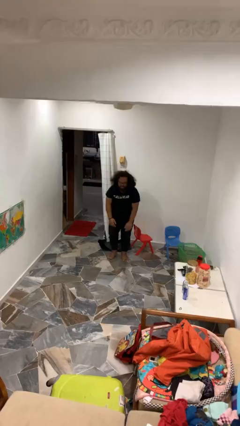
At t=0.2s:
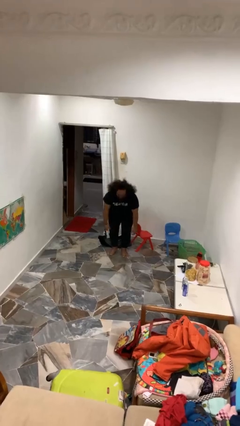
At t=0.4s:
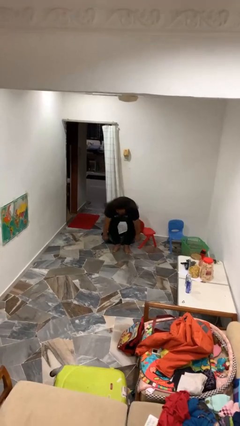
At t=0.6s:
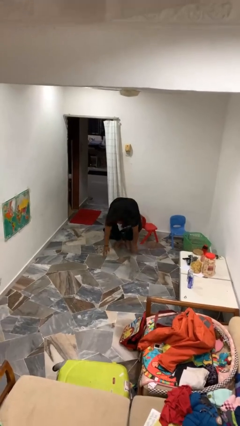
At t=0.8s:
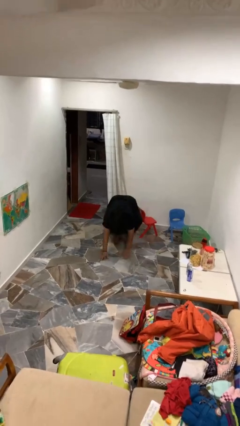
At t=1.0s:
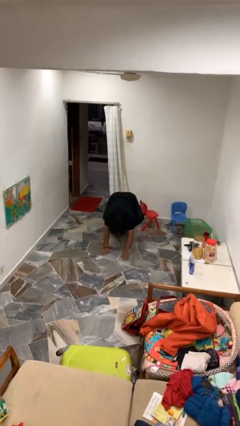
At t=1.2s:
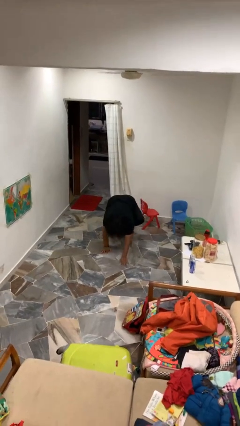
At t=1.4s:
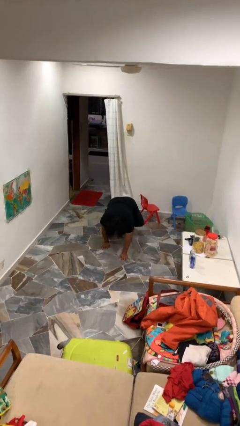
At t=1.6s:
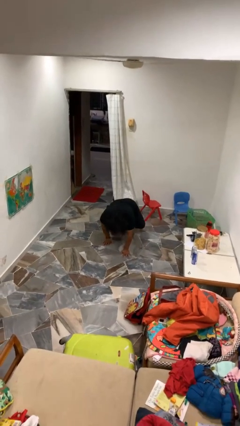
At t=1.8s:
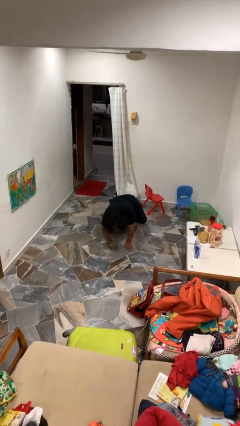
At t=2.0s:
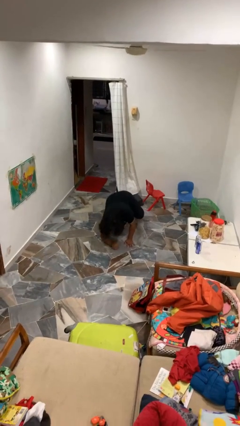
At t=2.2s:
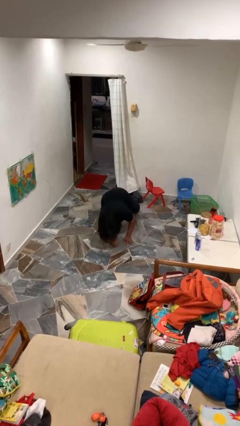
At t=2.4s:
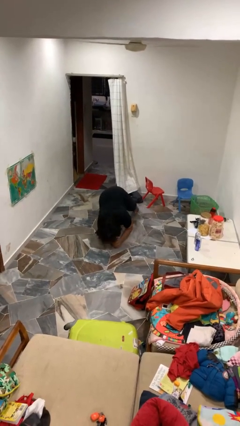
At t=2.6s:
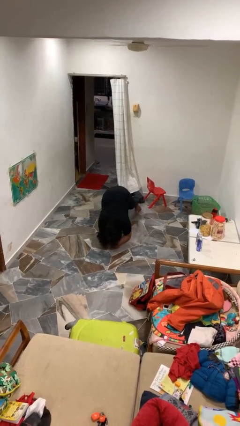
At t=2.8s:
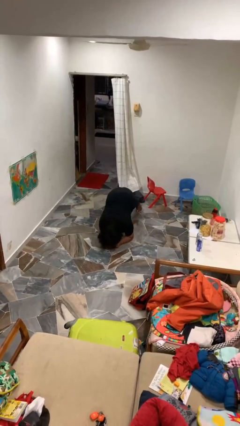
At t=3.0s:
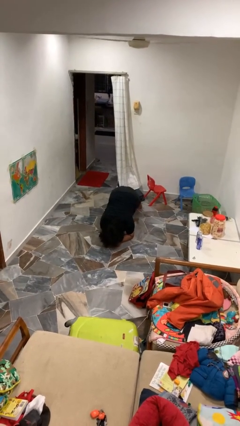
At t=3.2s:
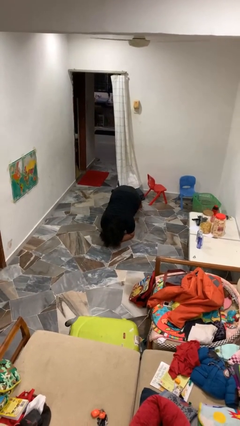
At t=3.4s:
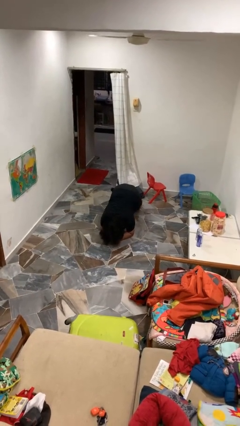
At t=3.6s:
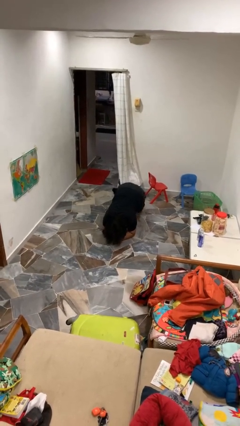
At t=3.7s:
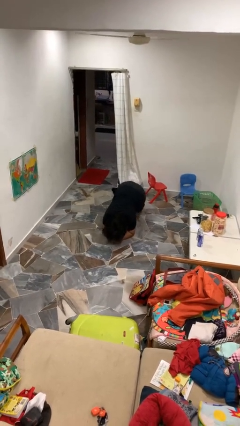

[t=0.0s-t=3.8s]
person exercises with plank

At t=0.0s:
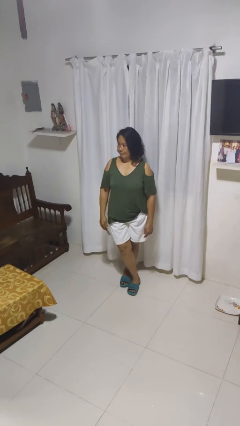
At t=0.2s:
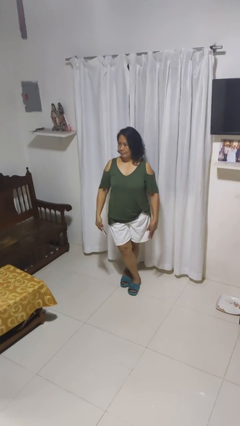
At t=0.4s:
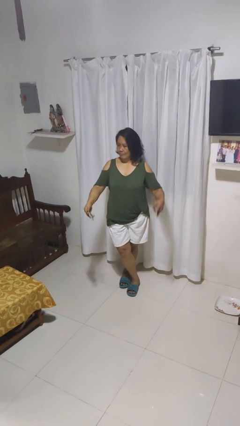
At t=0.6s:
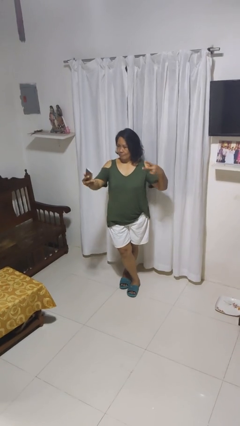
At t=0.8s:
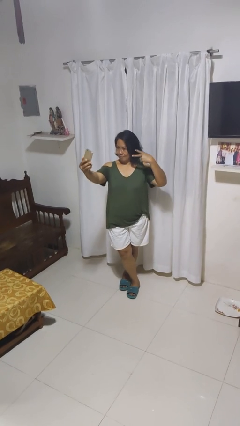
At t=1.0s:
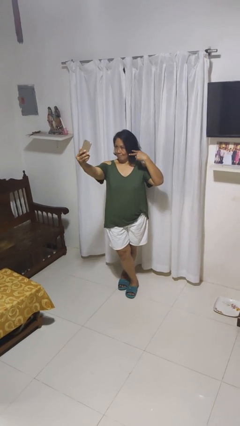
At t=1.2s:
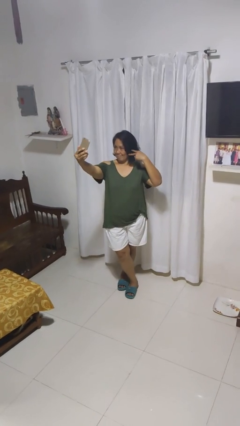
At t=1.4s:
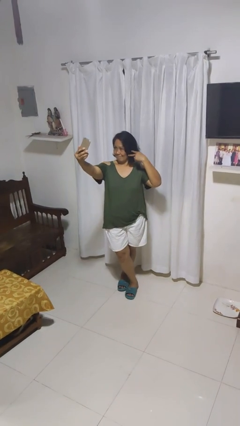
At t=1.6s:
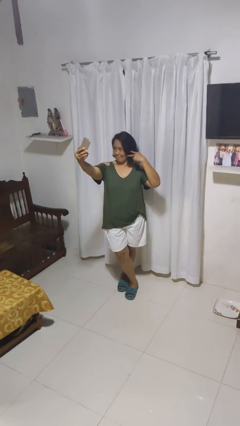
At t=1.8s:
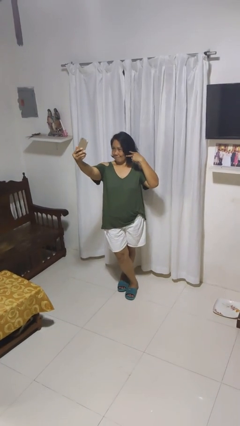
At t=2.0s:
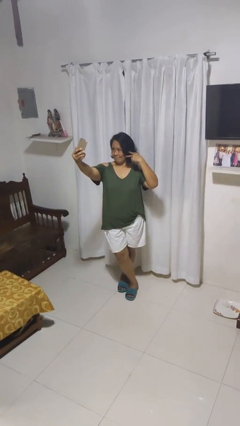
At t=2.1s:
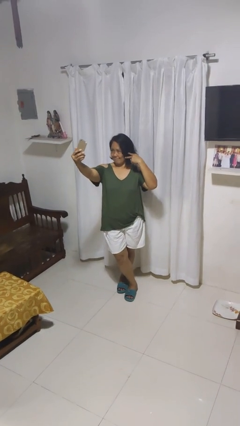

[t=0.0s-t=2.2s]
person takes selfie

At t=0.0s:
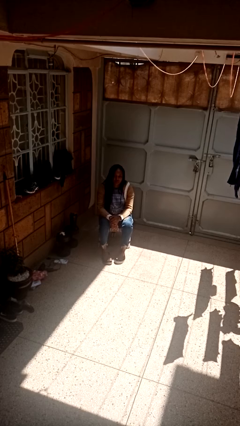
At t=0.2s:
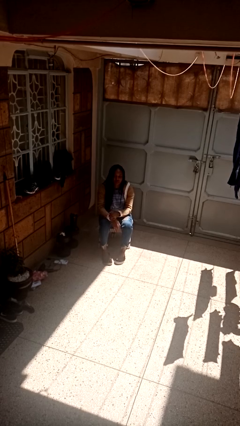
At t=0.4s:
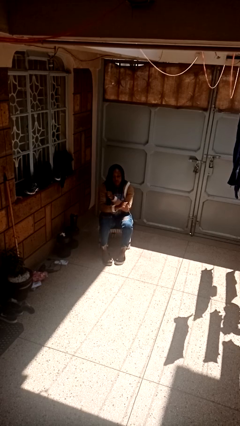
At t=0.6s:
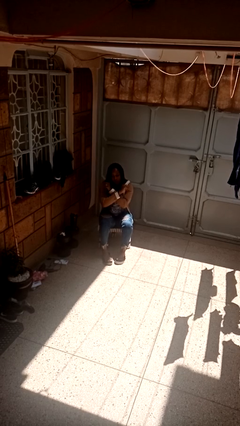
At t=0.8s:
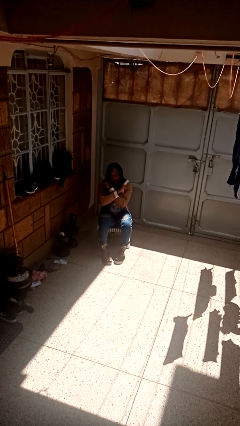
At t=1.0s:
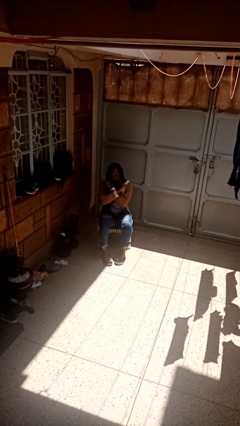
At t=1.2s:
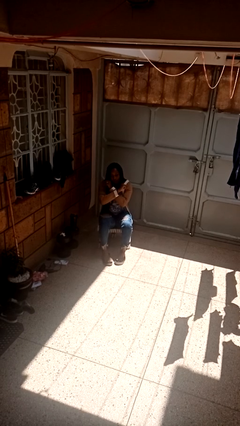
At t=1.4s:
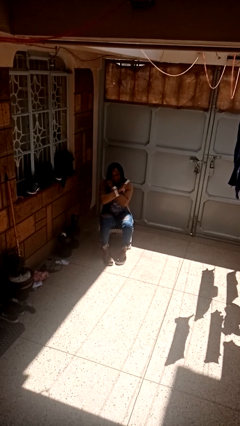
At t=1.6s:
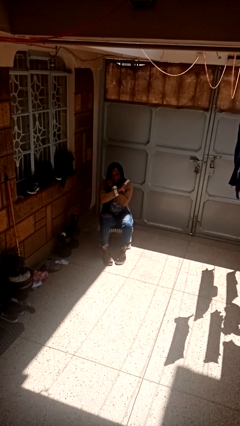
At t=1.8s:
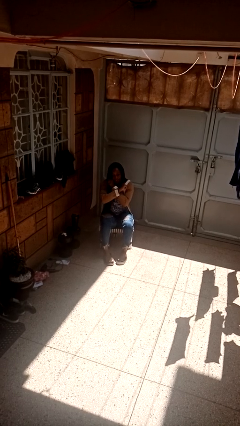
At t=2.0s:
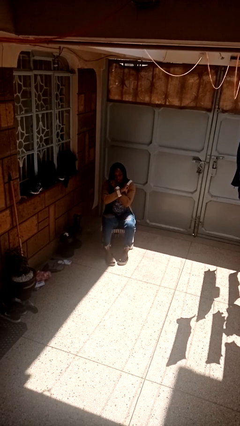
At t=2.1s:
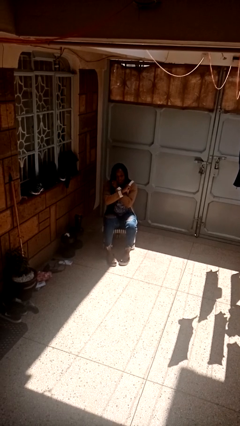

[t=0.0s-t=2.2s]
person gestures arms x

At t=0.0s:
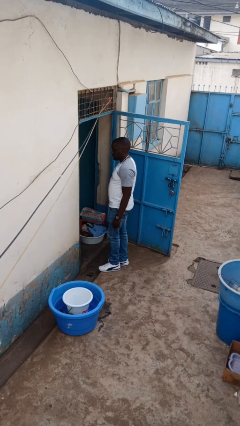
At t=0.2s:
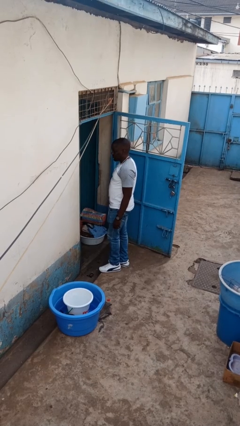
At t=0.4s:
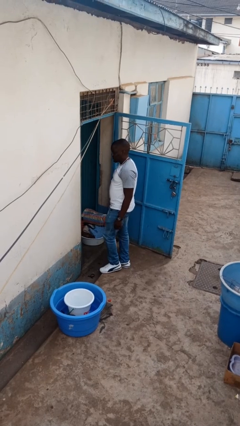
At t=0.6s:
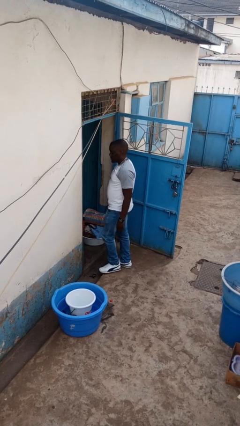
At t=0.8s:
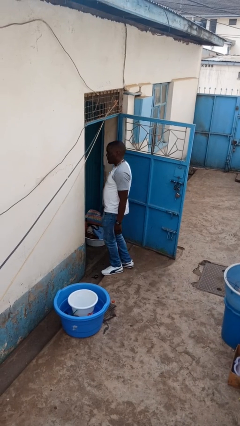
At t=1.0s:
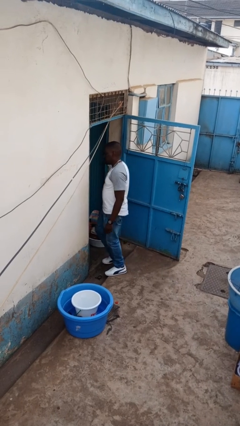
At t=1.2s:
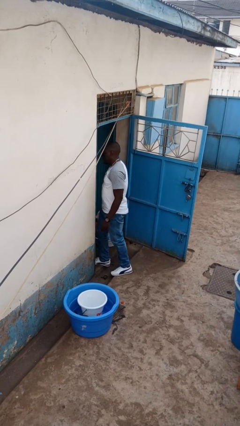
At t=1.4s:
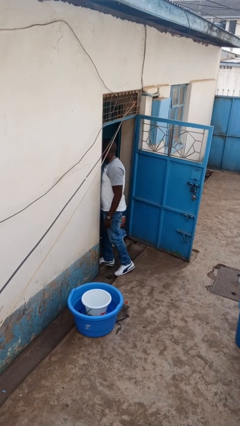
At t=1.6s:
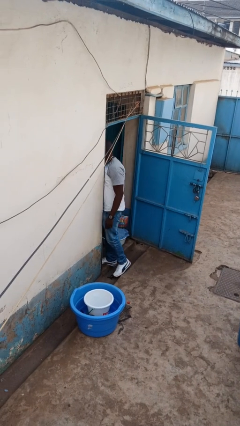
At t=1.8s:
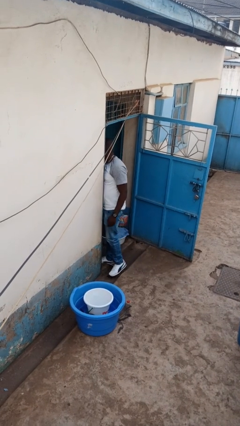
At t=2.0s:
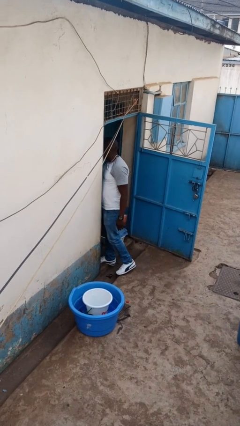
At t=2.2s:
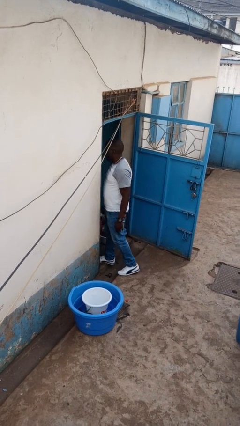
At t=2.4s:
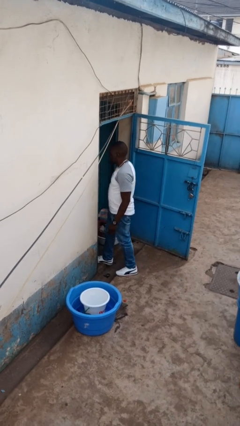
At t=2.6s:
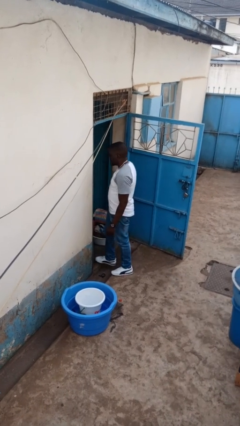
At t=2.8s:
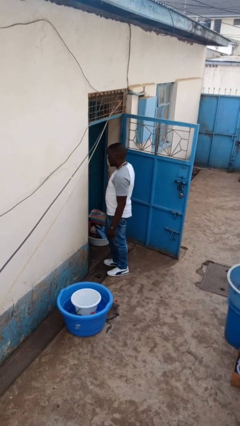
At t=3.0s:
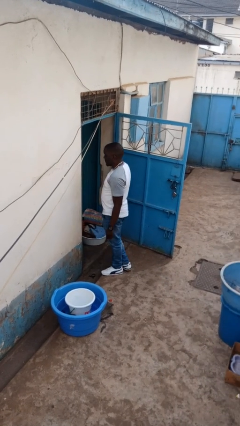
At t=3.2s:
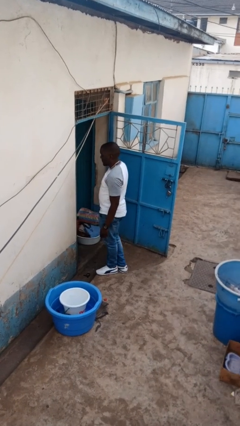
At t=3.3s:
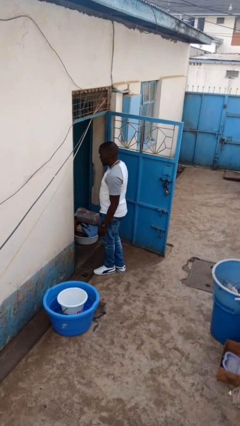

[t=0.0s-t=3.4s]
person bumps into wall

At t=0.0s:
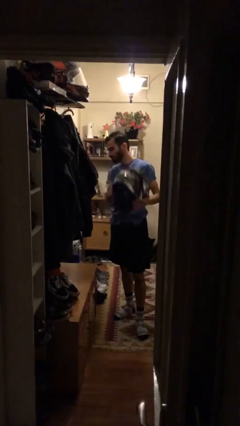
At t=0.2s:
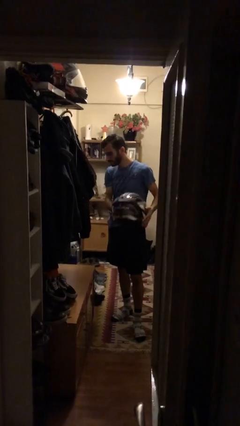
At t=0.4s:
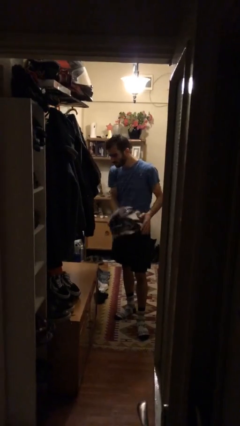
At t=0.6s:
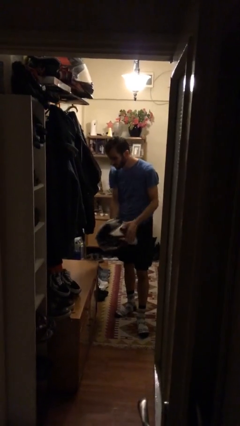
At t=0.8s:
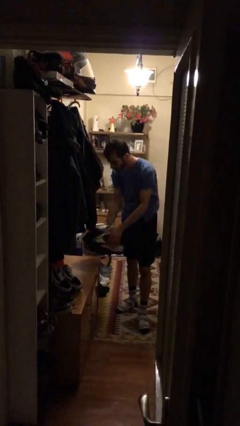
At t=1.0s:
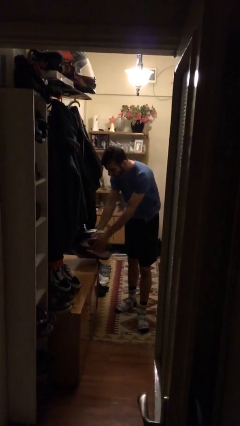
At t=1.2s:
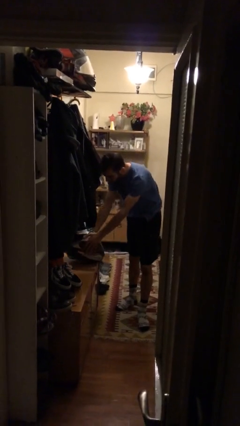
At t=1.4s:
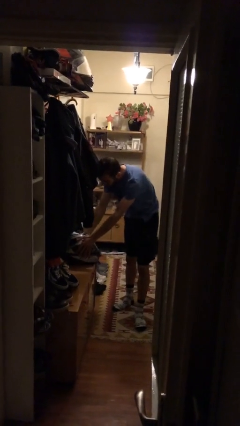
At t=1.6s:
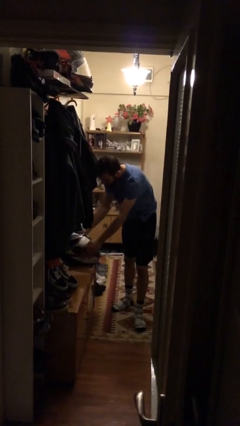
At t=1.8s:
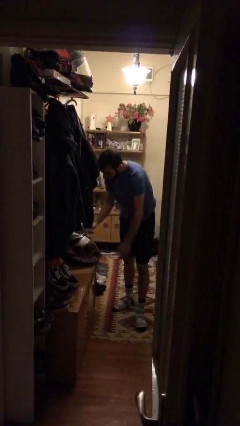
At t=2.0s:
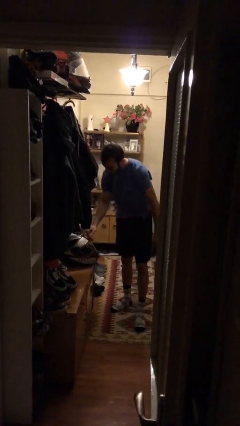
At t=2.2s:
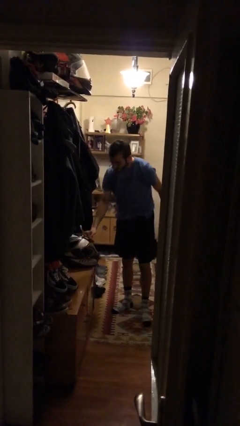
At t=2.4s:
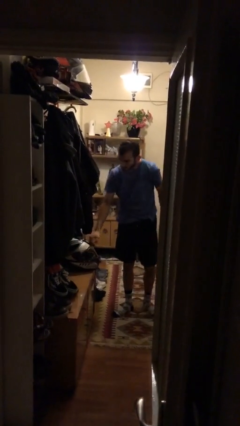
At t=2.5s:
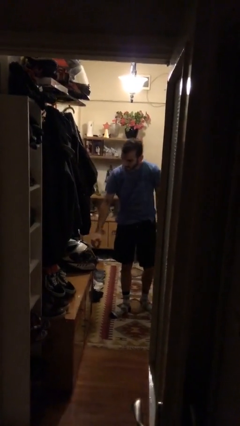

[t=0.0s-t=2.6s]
person puts down object on table

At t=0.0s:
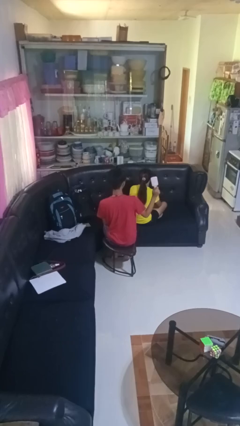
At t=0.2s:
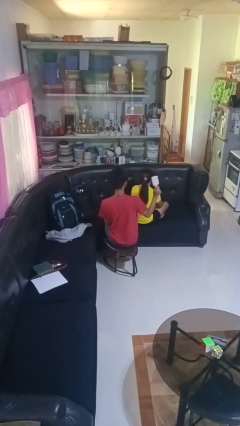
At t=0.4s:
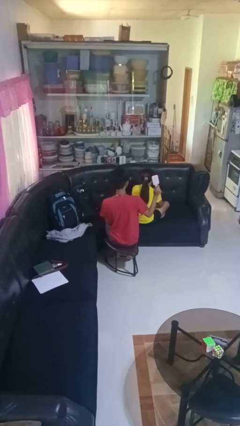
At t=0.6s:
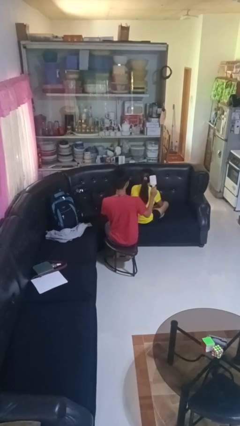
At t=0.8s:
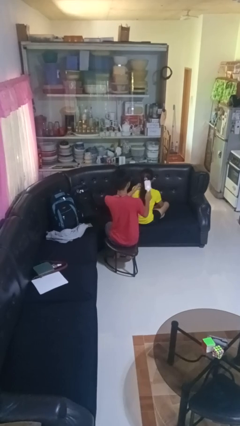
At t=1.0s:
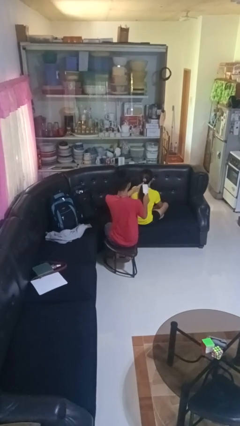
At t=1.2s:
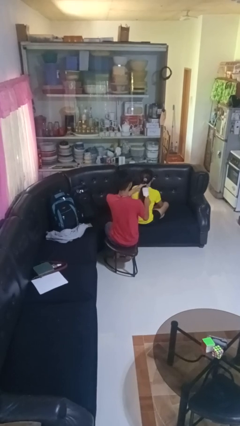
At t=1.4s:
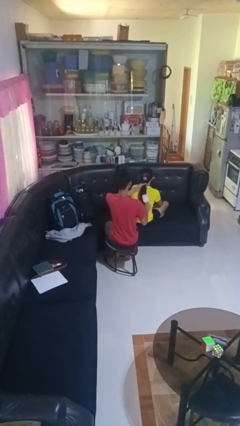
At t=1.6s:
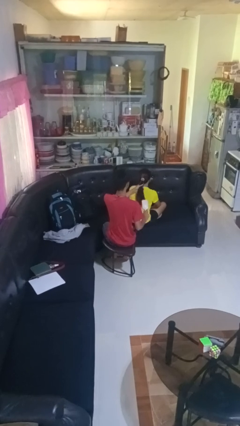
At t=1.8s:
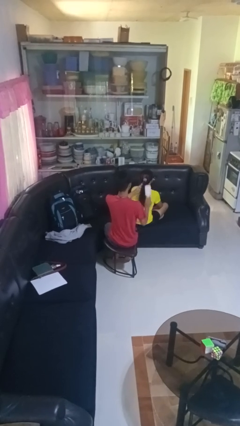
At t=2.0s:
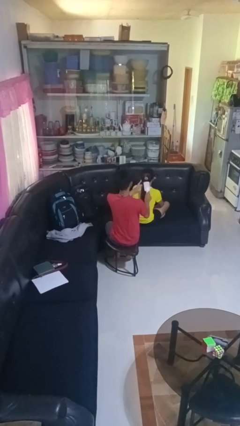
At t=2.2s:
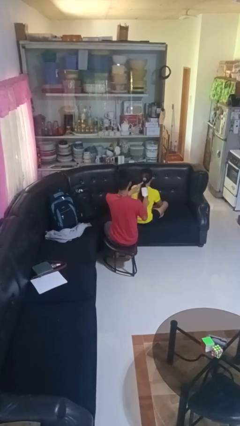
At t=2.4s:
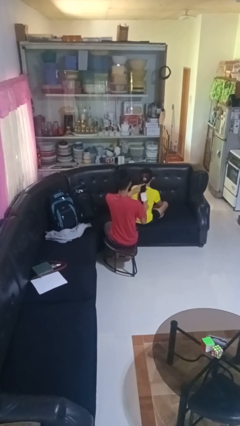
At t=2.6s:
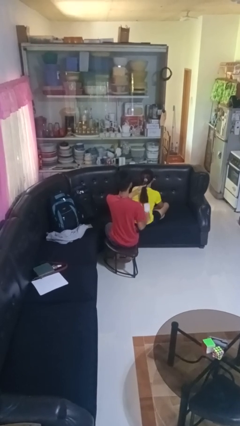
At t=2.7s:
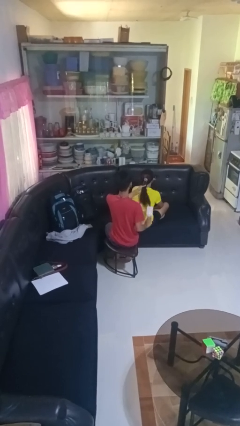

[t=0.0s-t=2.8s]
person brushes hair of person

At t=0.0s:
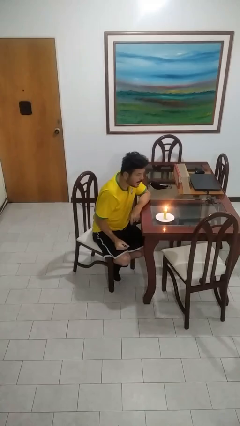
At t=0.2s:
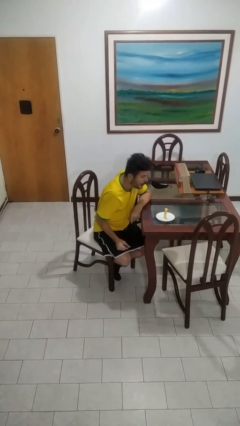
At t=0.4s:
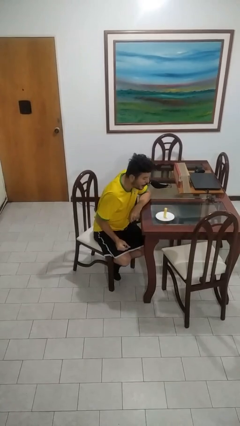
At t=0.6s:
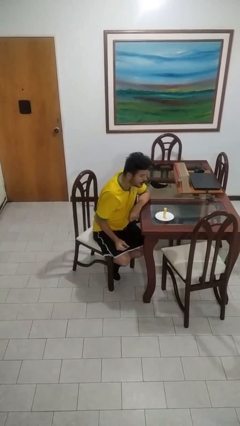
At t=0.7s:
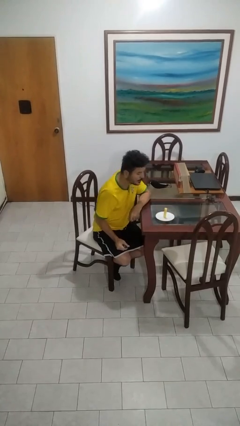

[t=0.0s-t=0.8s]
person extinguishes candle
